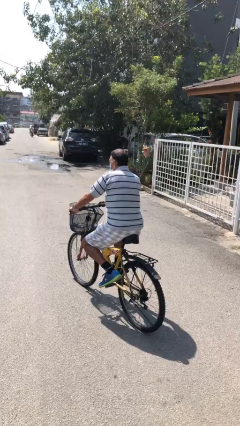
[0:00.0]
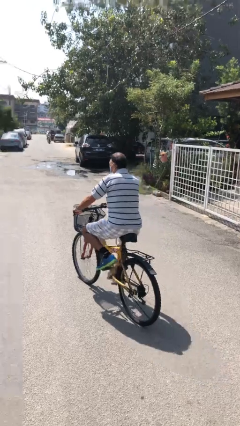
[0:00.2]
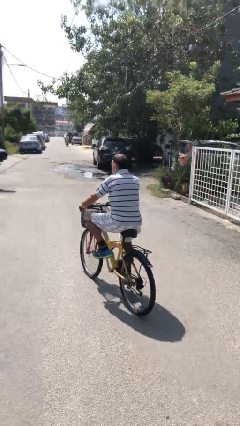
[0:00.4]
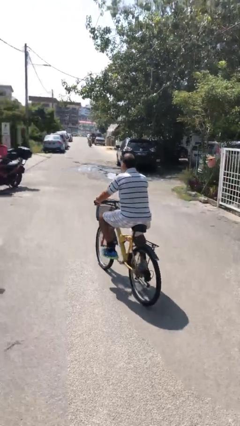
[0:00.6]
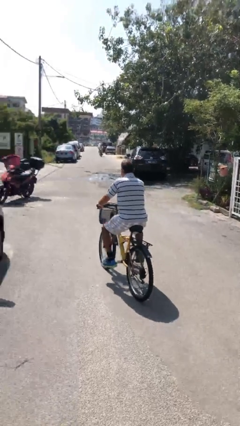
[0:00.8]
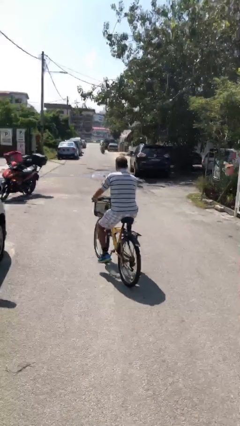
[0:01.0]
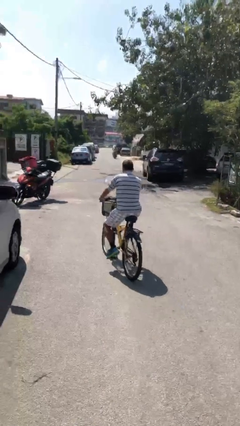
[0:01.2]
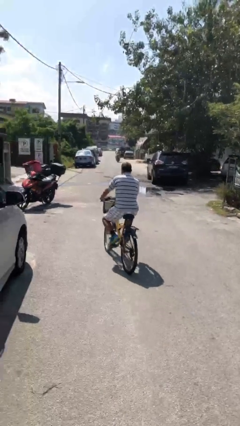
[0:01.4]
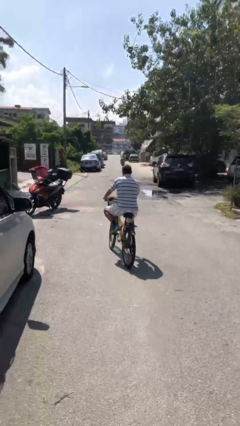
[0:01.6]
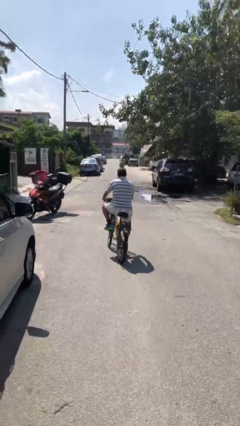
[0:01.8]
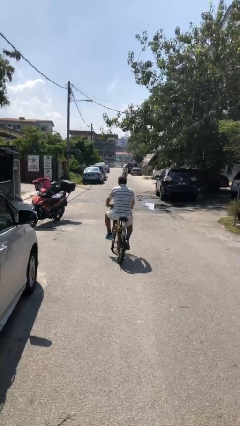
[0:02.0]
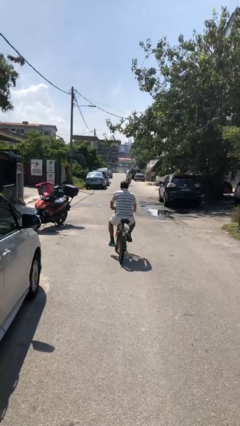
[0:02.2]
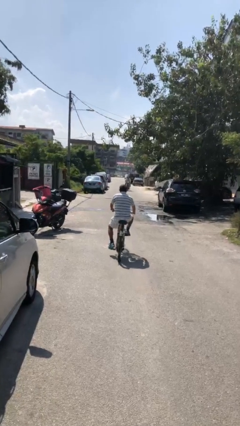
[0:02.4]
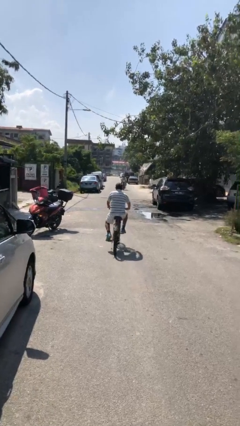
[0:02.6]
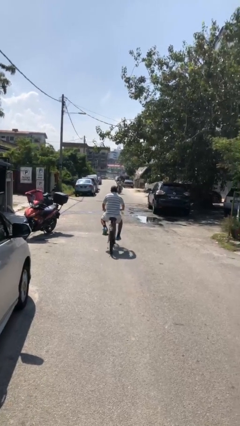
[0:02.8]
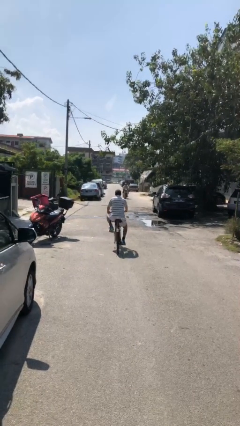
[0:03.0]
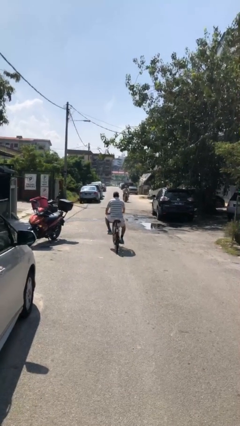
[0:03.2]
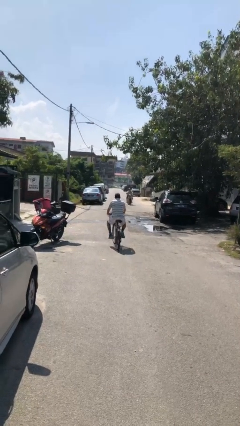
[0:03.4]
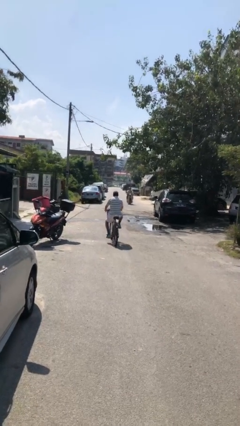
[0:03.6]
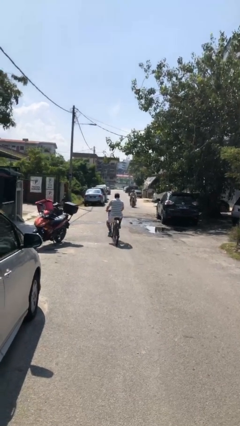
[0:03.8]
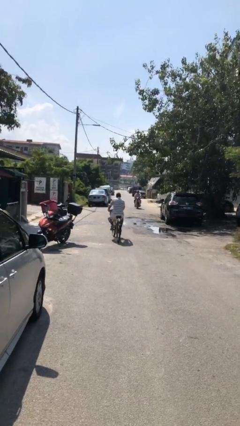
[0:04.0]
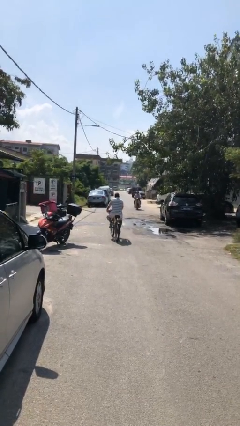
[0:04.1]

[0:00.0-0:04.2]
person rides bicycle

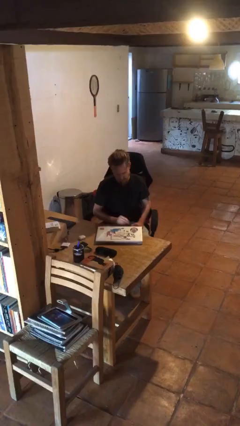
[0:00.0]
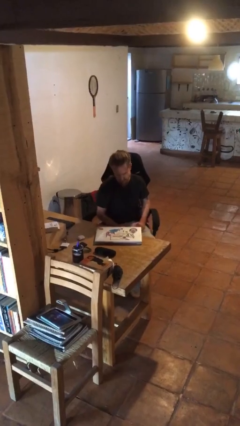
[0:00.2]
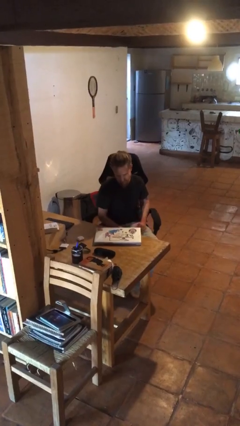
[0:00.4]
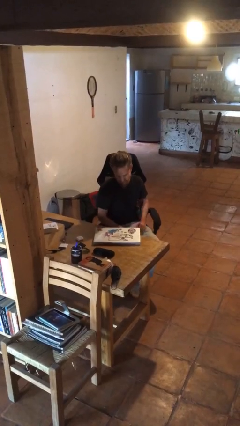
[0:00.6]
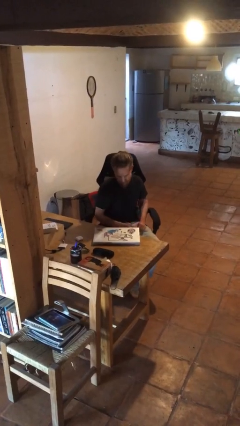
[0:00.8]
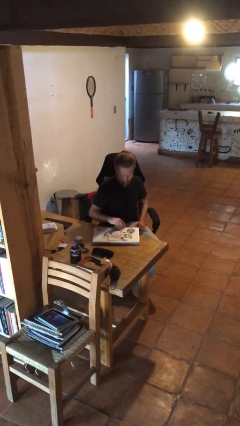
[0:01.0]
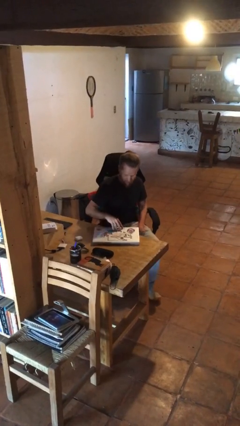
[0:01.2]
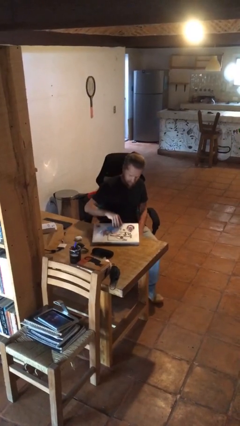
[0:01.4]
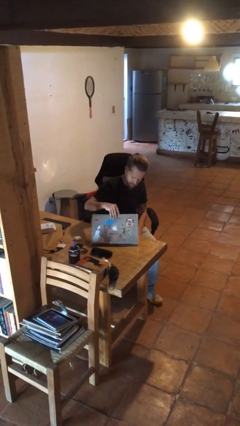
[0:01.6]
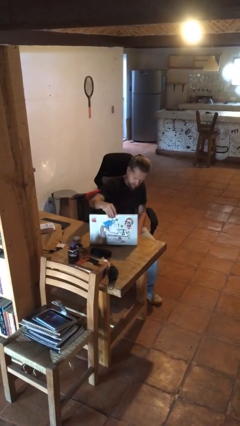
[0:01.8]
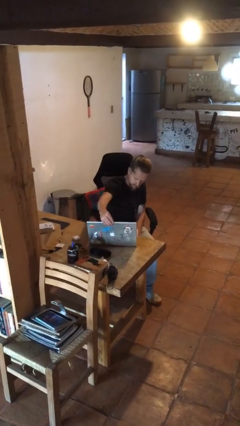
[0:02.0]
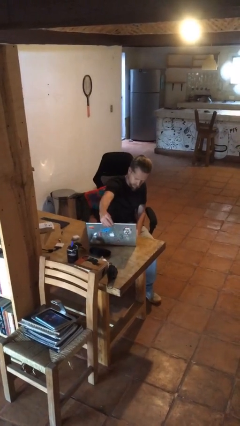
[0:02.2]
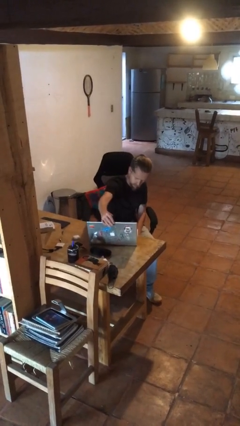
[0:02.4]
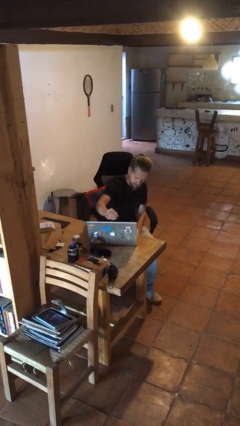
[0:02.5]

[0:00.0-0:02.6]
person opens laptop

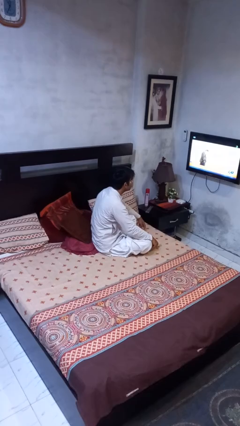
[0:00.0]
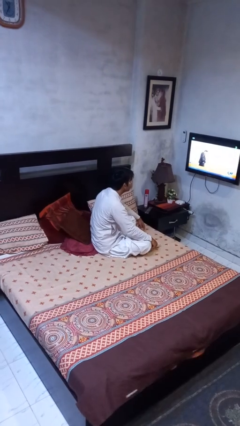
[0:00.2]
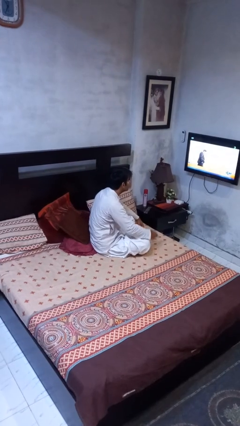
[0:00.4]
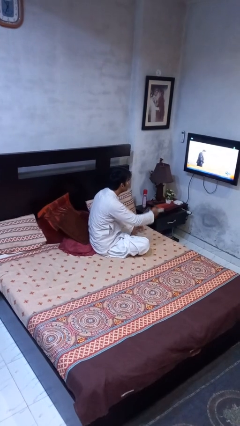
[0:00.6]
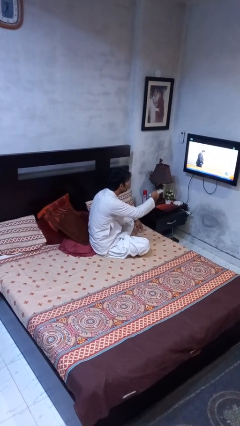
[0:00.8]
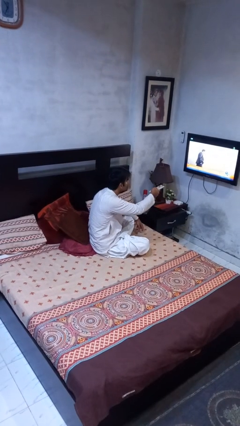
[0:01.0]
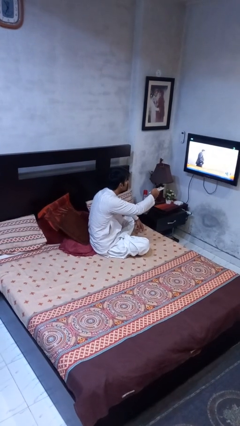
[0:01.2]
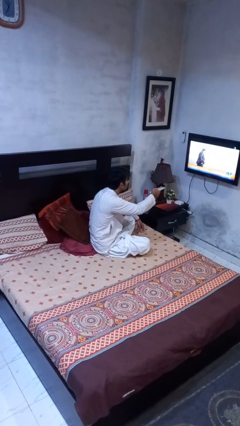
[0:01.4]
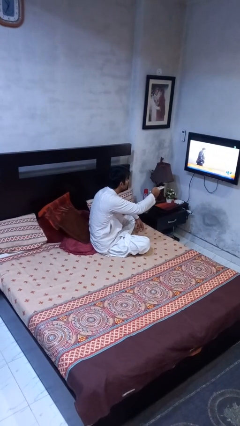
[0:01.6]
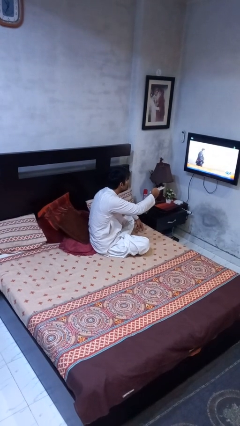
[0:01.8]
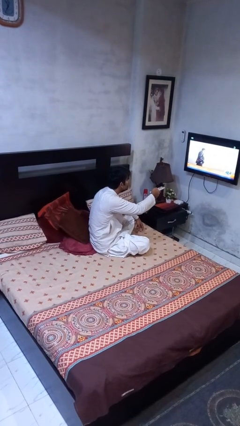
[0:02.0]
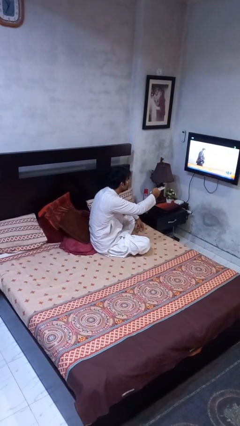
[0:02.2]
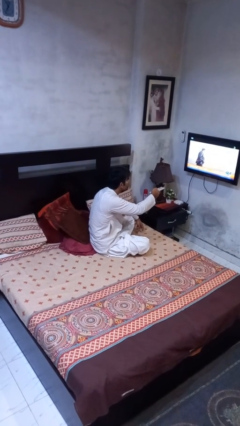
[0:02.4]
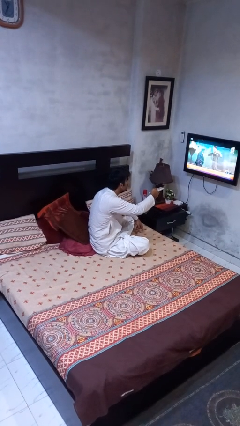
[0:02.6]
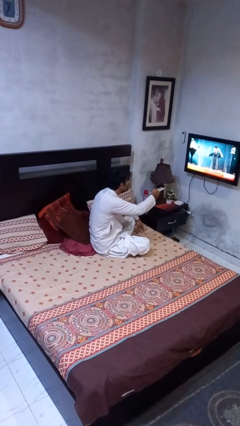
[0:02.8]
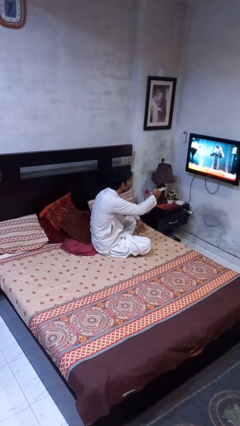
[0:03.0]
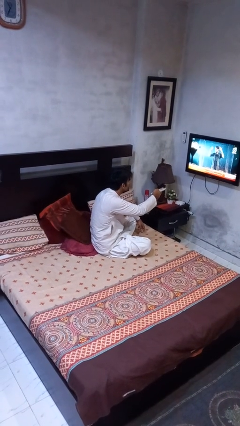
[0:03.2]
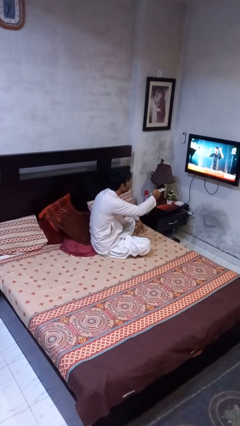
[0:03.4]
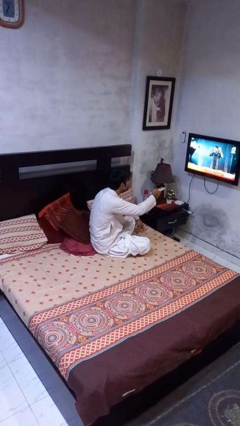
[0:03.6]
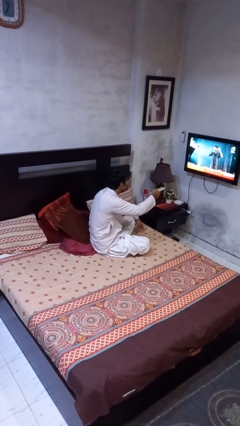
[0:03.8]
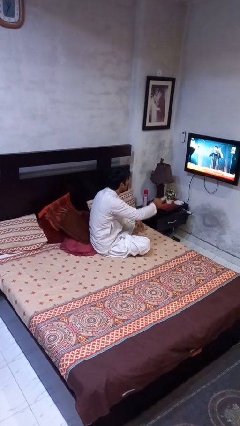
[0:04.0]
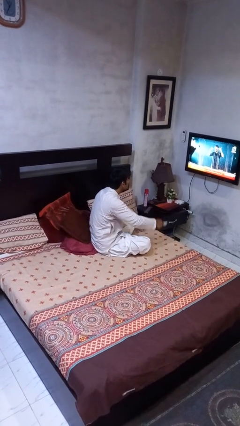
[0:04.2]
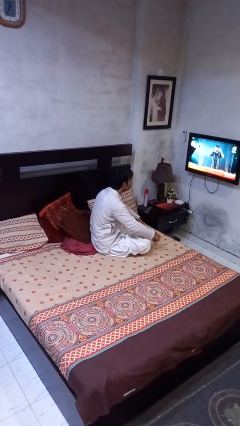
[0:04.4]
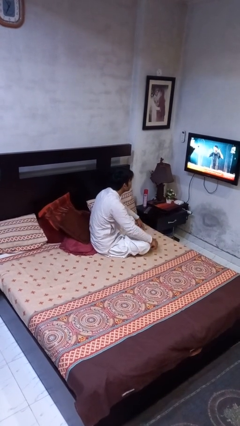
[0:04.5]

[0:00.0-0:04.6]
person uses television remote

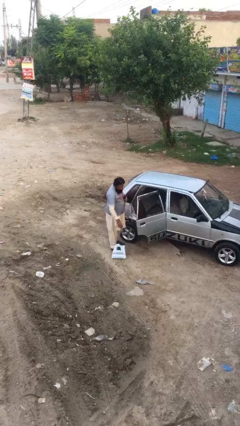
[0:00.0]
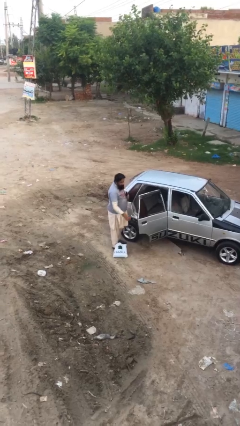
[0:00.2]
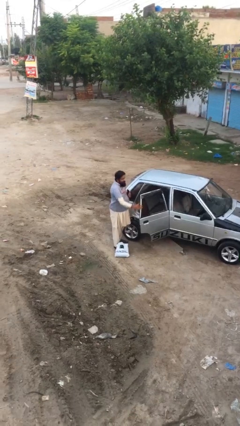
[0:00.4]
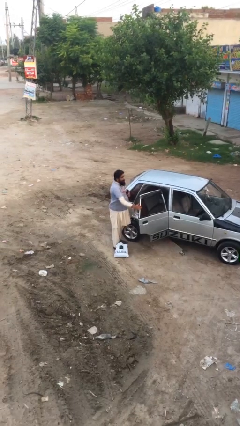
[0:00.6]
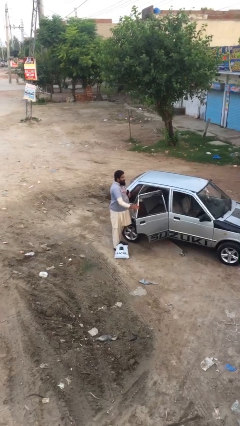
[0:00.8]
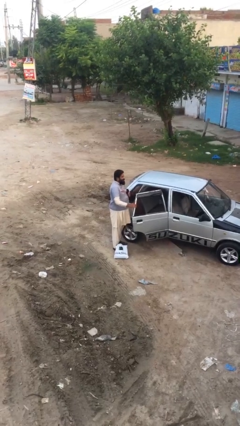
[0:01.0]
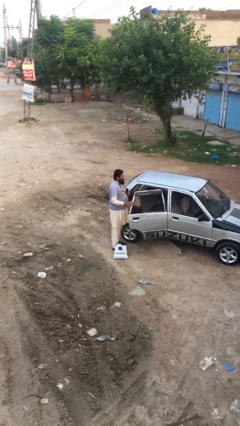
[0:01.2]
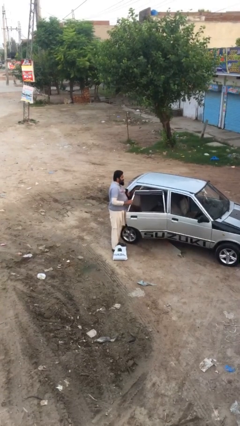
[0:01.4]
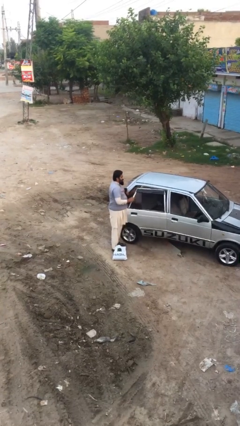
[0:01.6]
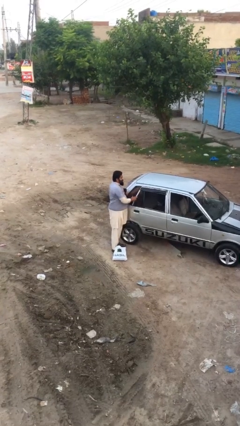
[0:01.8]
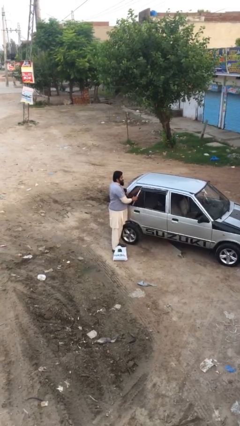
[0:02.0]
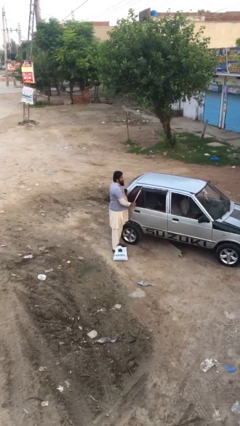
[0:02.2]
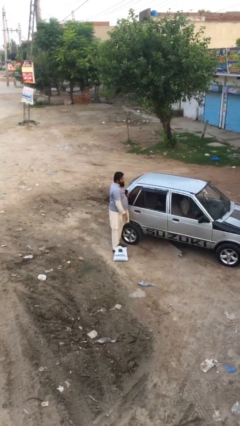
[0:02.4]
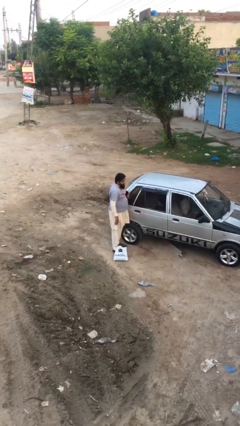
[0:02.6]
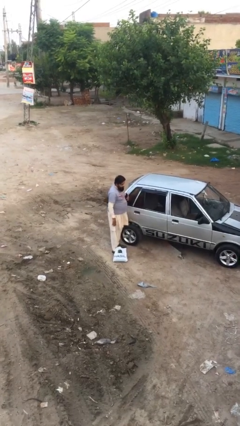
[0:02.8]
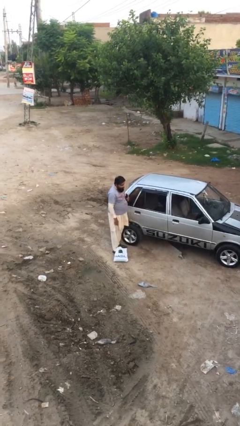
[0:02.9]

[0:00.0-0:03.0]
person closes car door

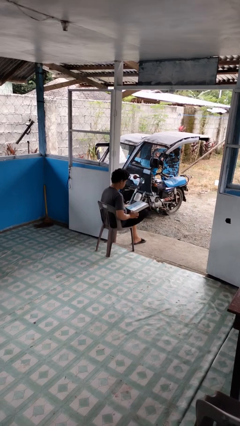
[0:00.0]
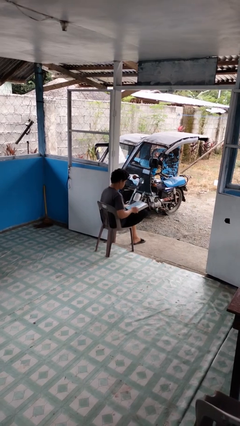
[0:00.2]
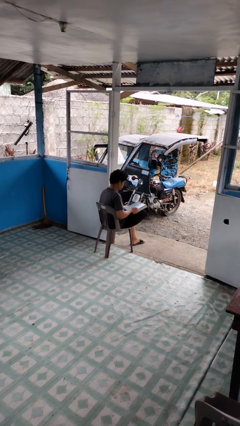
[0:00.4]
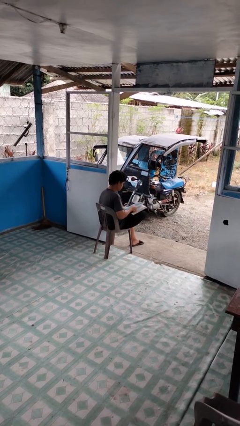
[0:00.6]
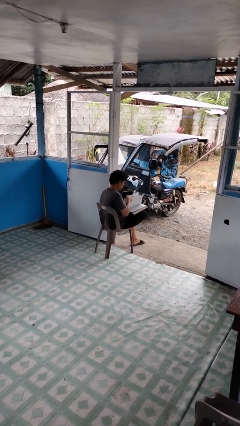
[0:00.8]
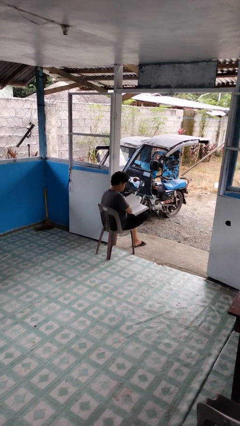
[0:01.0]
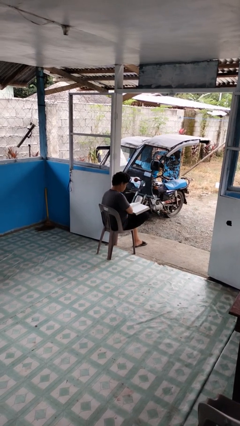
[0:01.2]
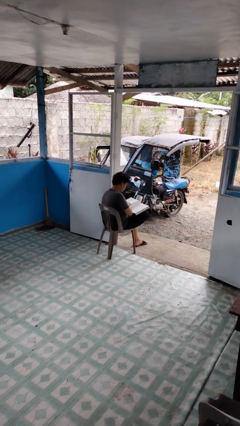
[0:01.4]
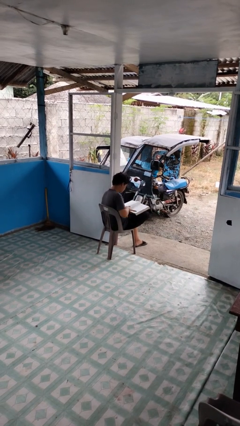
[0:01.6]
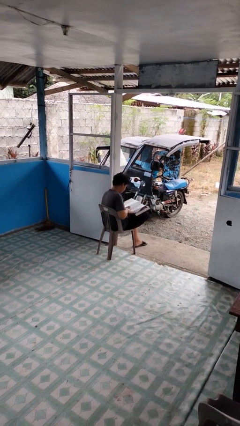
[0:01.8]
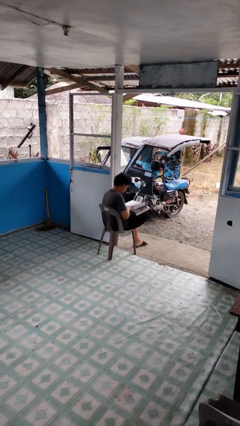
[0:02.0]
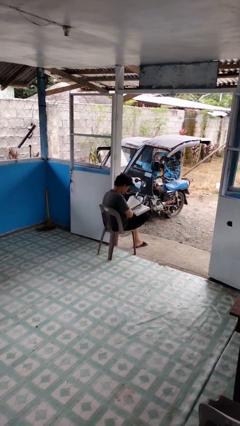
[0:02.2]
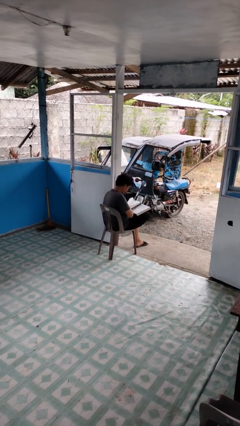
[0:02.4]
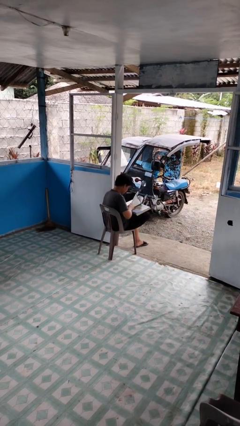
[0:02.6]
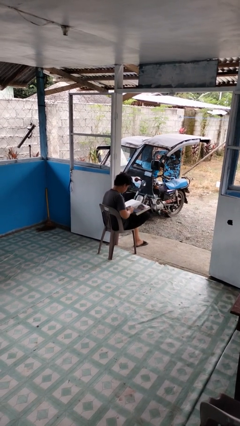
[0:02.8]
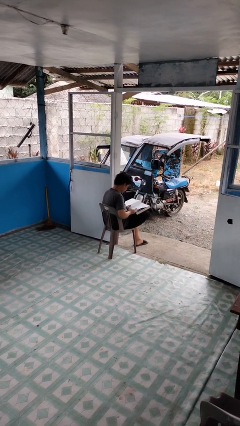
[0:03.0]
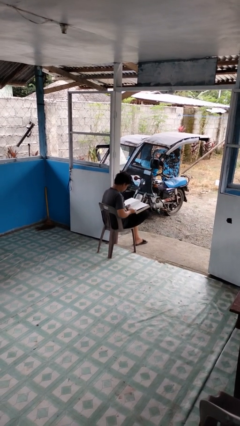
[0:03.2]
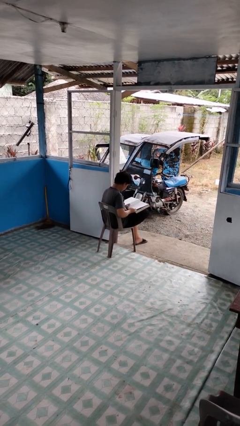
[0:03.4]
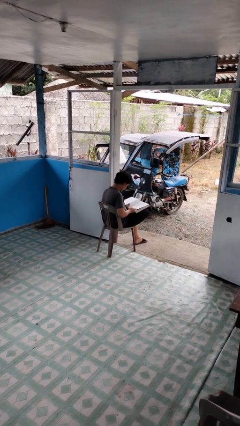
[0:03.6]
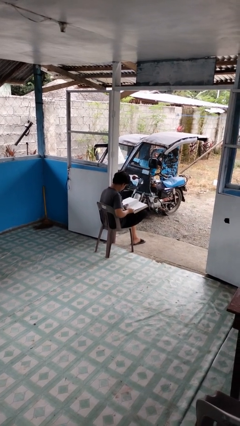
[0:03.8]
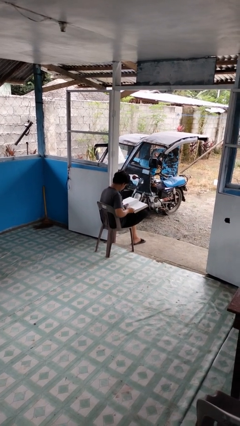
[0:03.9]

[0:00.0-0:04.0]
person reads book
